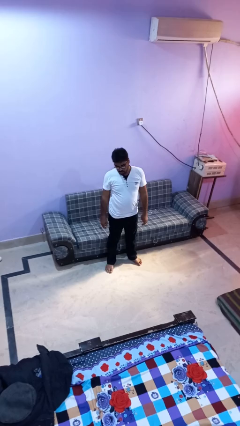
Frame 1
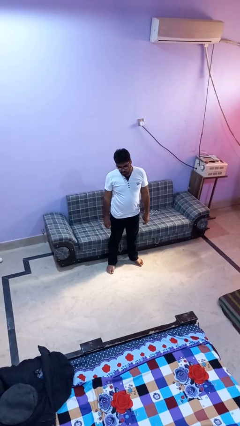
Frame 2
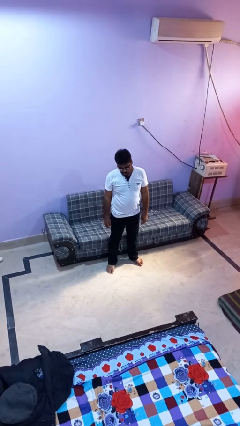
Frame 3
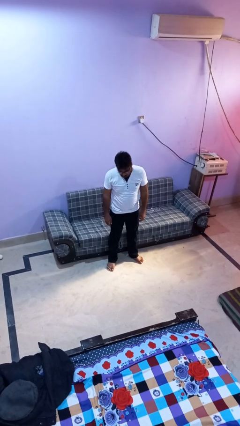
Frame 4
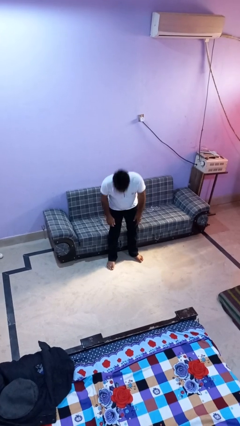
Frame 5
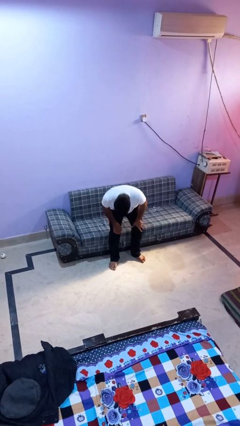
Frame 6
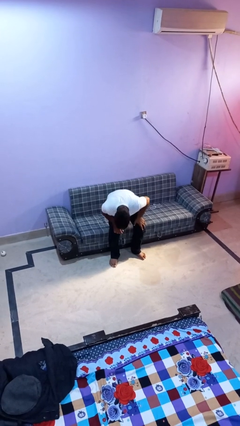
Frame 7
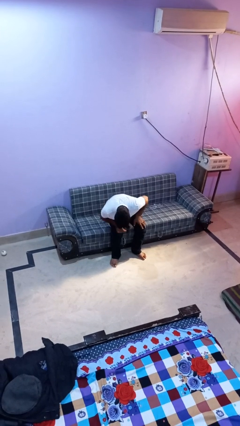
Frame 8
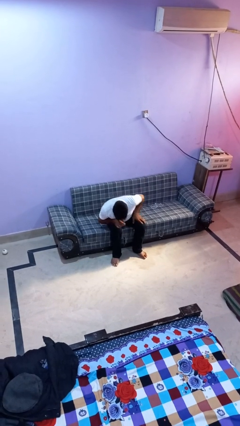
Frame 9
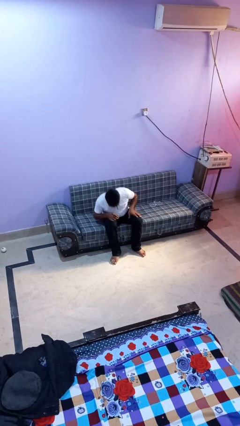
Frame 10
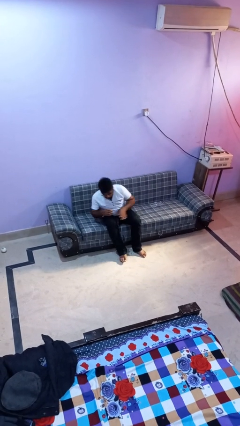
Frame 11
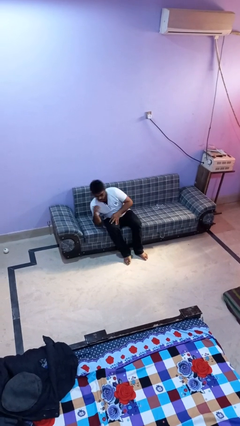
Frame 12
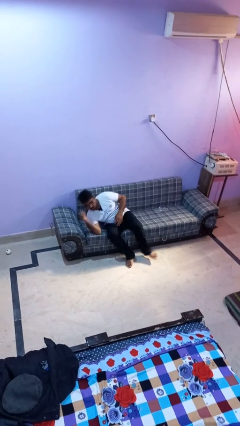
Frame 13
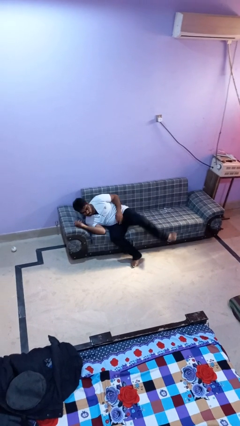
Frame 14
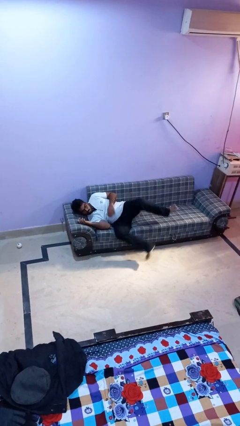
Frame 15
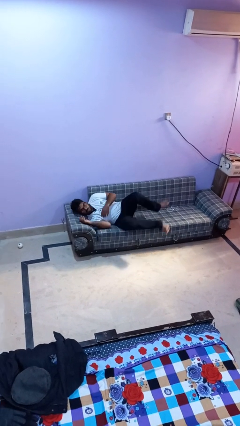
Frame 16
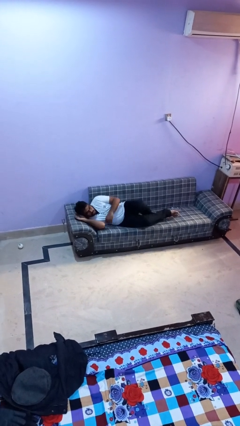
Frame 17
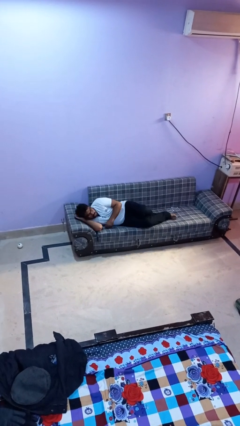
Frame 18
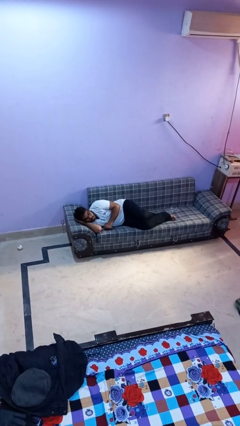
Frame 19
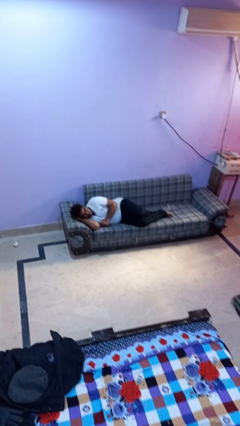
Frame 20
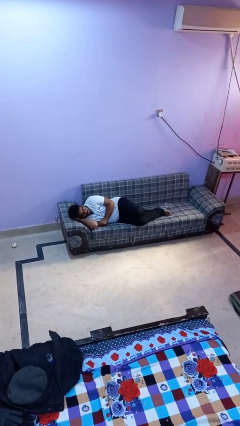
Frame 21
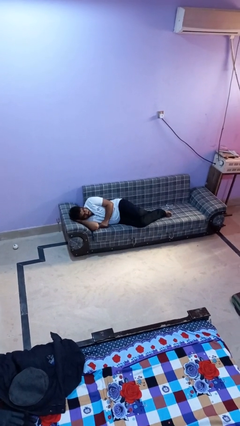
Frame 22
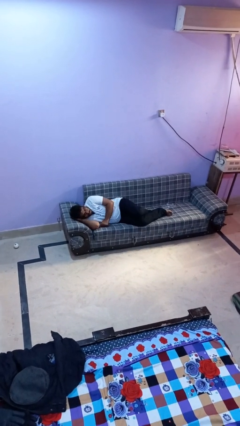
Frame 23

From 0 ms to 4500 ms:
person lies down on couch

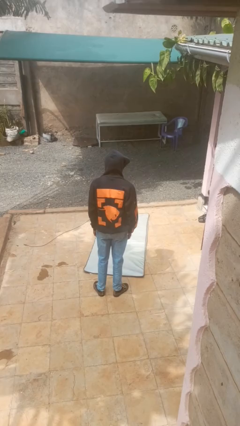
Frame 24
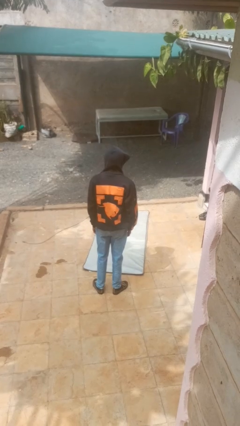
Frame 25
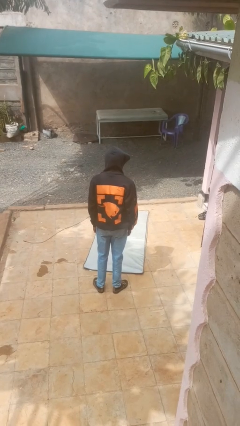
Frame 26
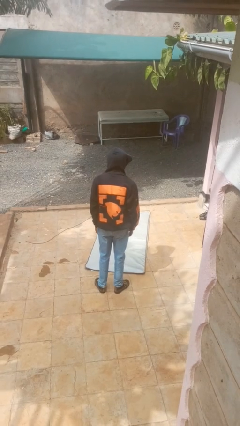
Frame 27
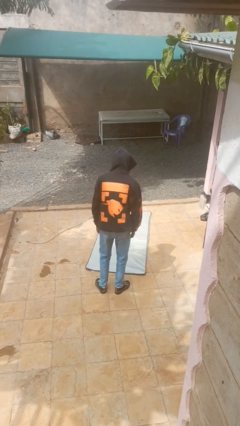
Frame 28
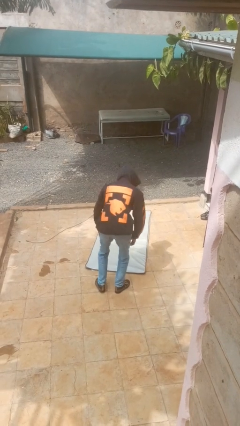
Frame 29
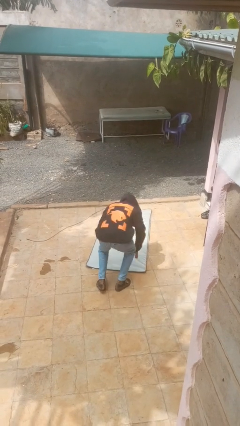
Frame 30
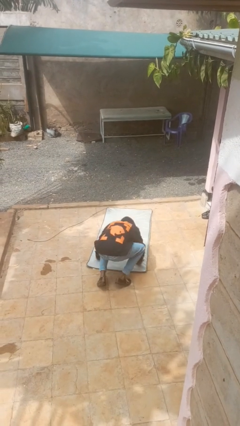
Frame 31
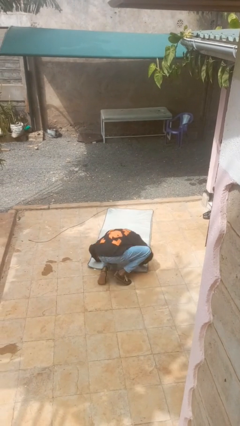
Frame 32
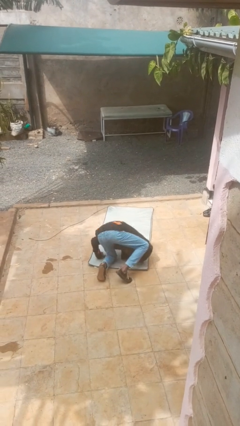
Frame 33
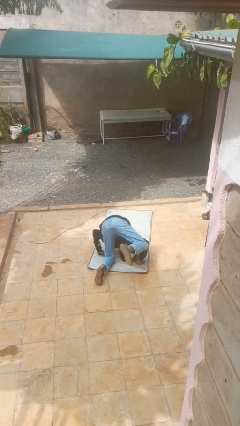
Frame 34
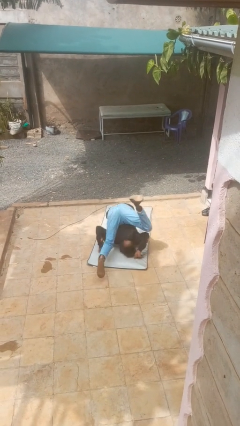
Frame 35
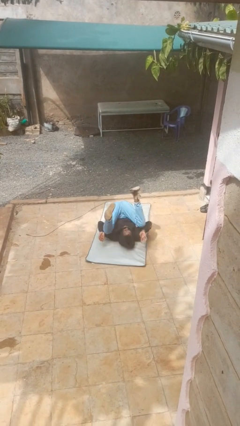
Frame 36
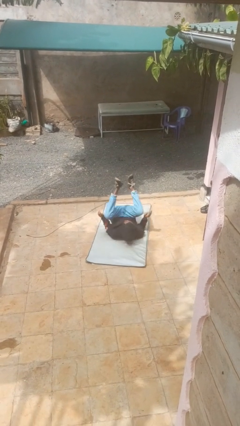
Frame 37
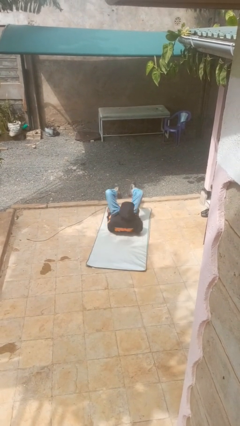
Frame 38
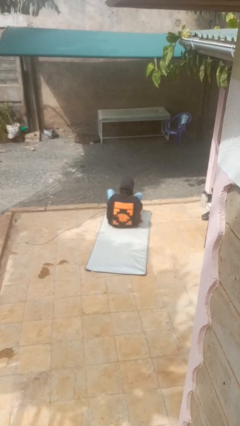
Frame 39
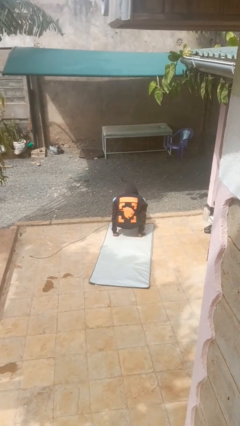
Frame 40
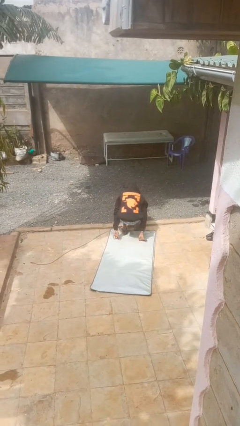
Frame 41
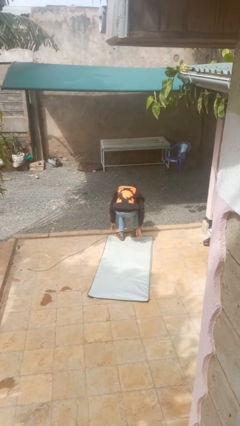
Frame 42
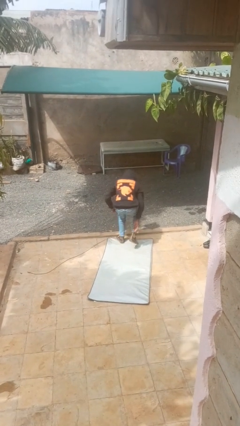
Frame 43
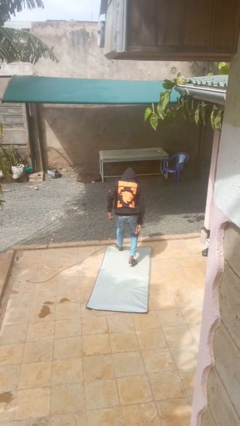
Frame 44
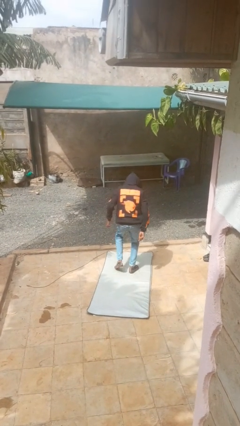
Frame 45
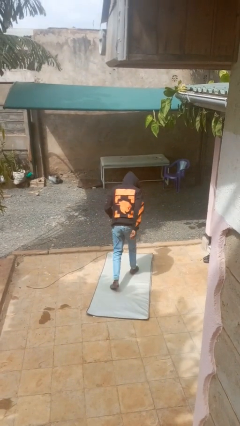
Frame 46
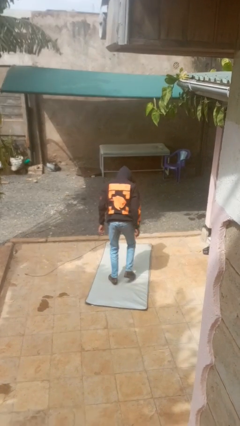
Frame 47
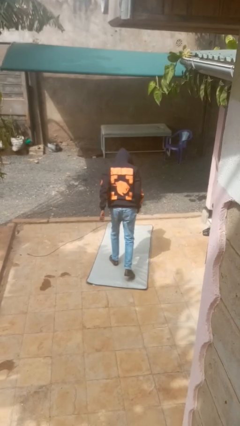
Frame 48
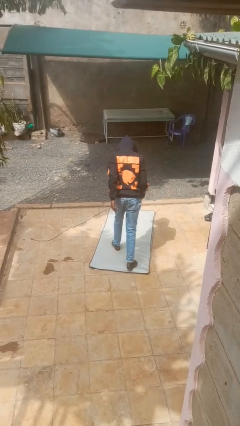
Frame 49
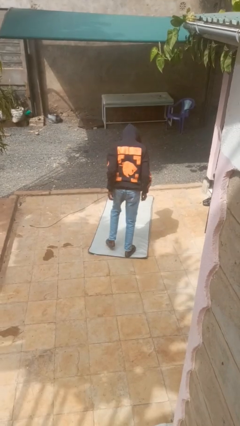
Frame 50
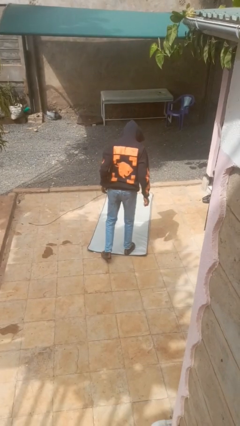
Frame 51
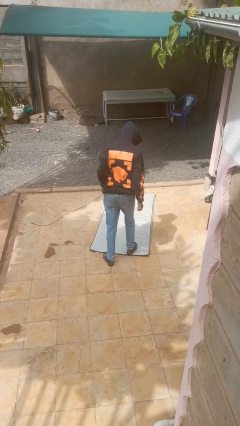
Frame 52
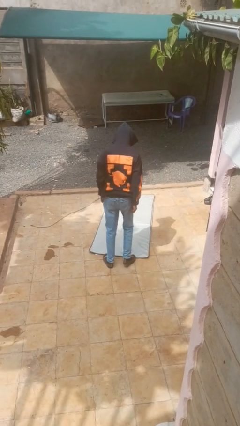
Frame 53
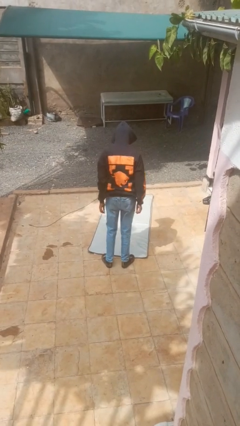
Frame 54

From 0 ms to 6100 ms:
person somersaults

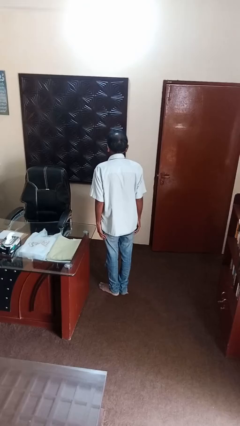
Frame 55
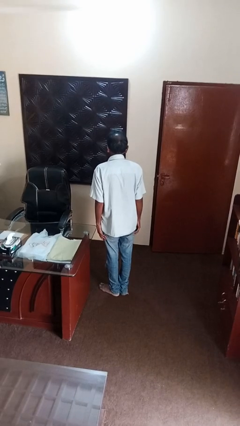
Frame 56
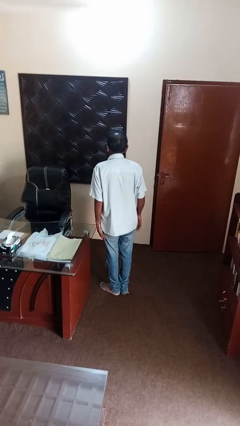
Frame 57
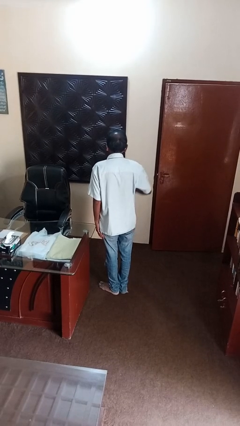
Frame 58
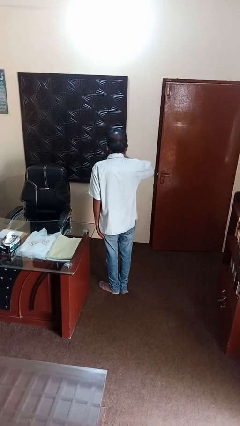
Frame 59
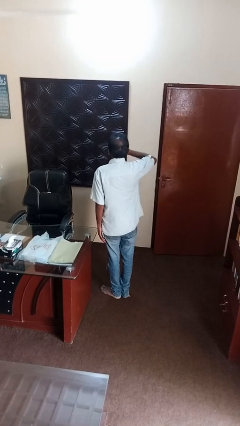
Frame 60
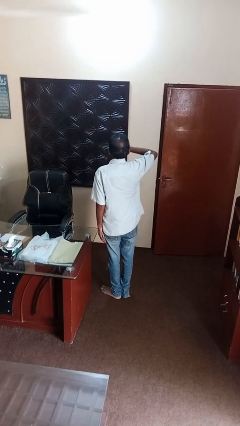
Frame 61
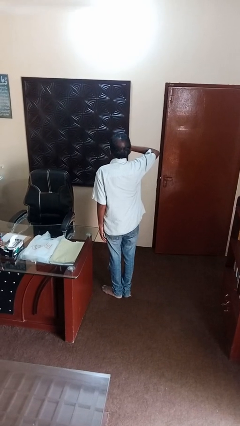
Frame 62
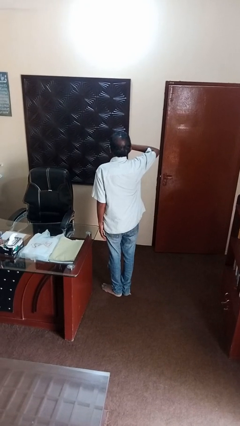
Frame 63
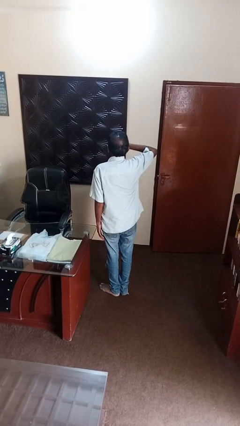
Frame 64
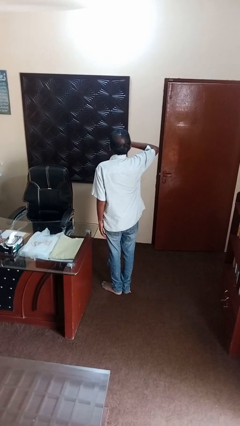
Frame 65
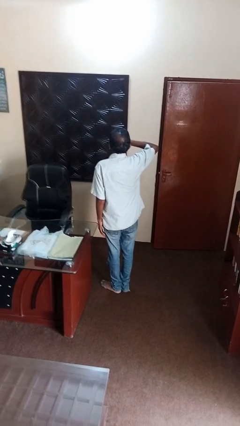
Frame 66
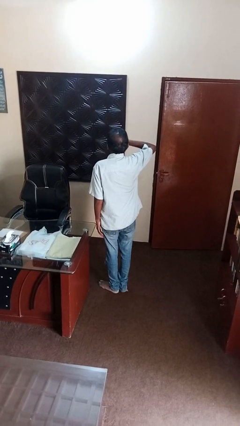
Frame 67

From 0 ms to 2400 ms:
person yawns

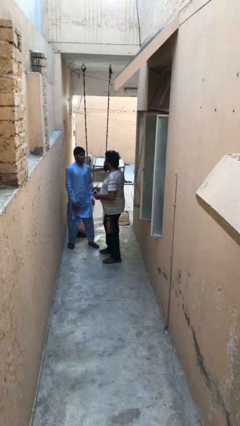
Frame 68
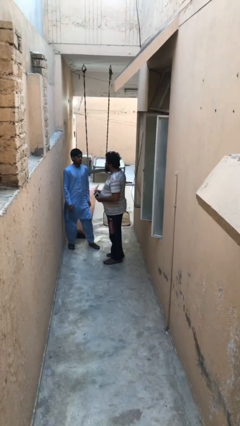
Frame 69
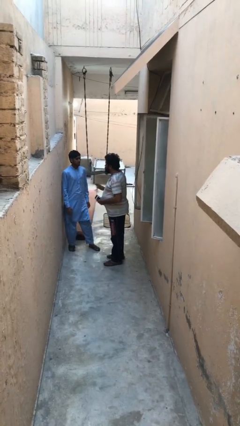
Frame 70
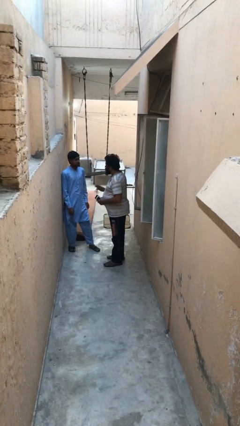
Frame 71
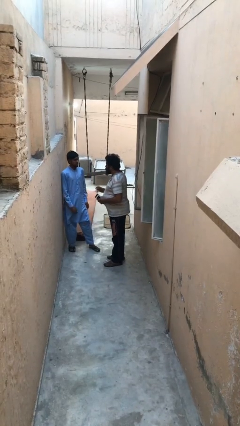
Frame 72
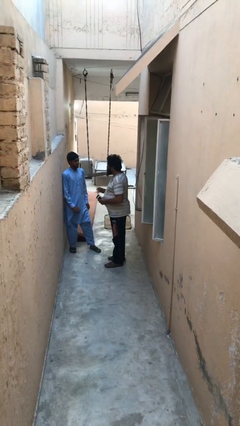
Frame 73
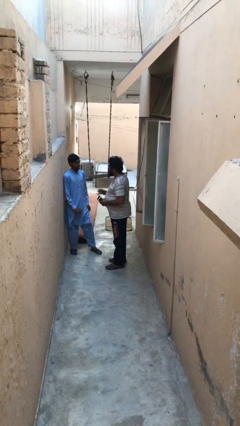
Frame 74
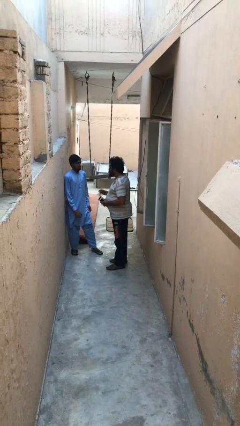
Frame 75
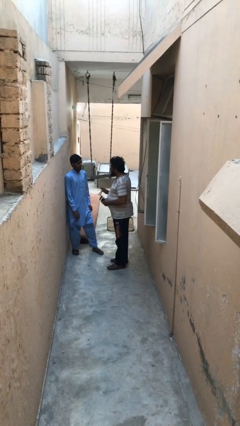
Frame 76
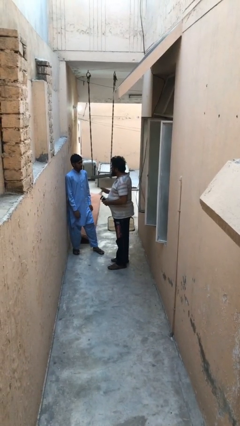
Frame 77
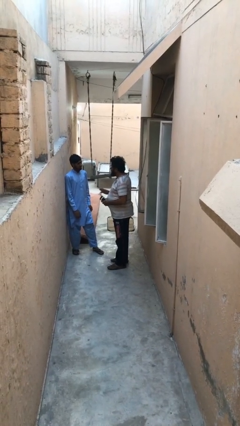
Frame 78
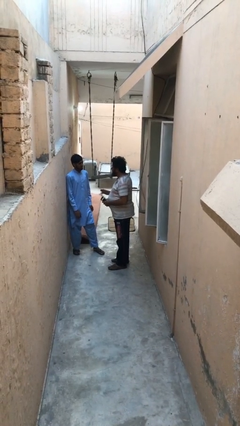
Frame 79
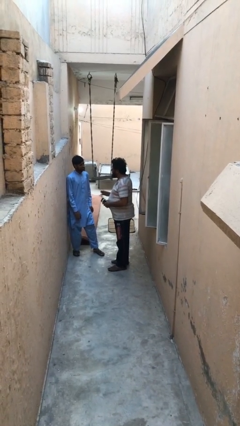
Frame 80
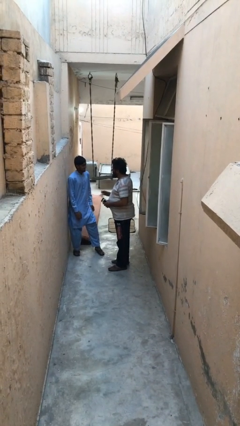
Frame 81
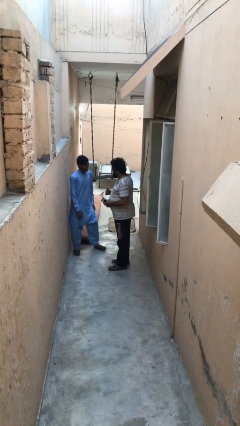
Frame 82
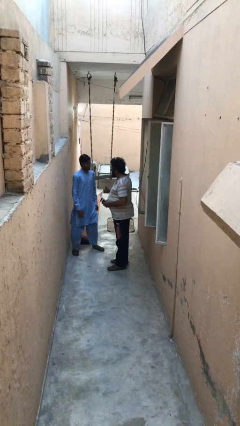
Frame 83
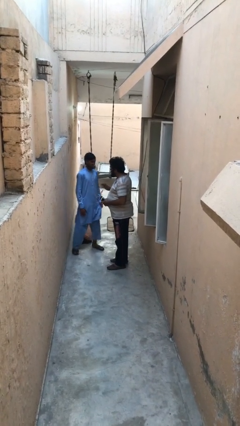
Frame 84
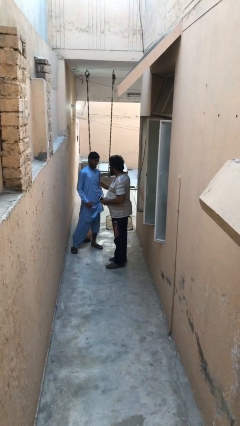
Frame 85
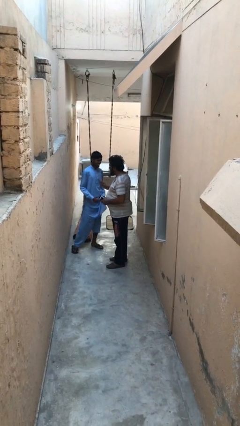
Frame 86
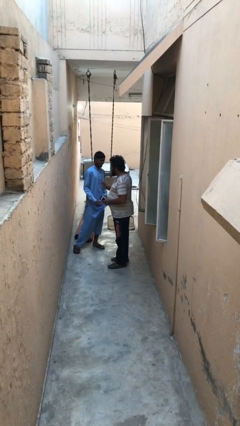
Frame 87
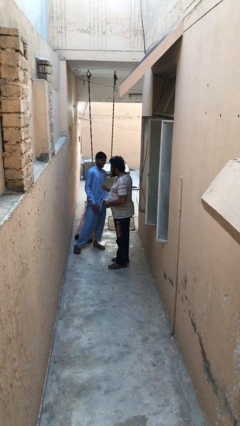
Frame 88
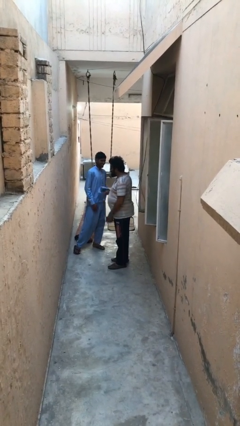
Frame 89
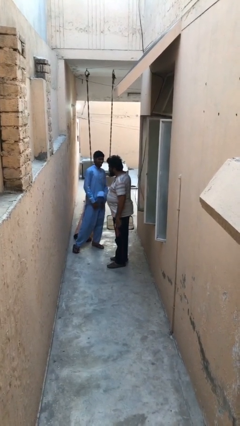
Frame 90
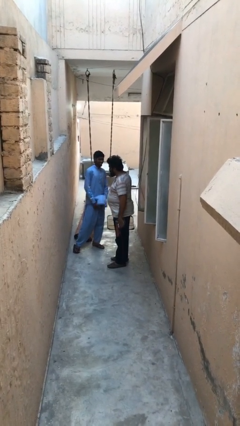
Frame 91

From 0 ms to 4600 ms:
person talks to person

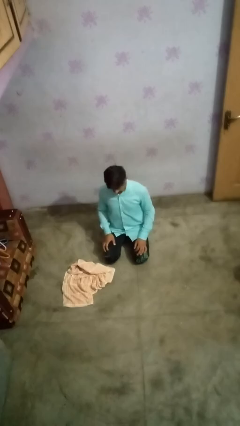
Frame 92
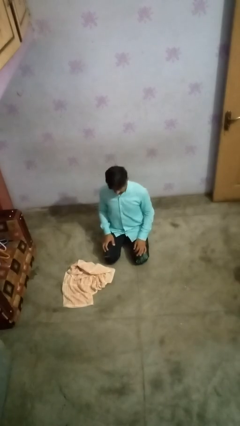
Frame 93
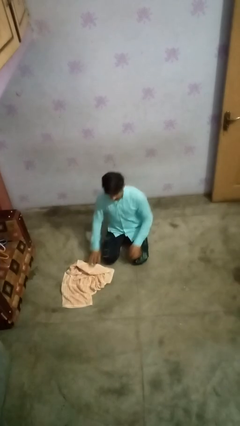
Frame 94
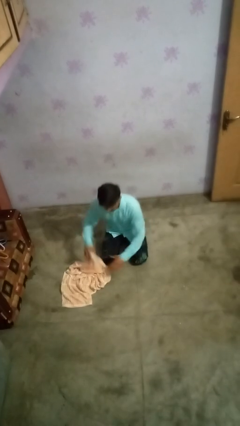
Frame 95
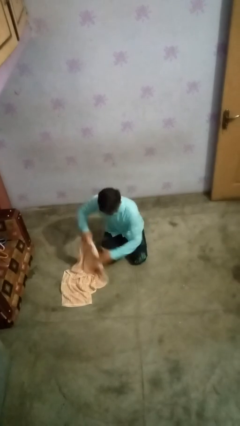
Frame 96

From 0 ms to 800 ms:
person folds towel
